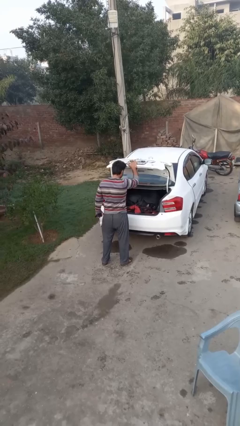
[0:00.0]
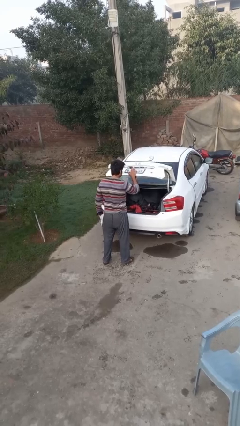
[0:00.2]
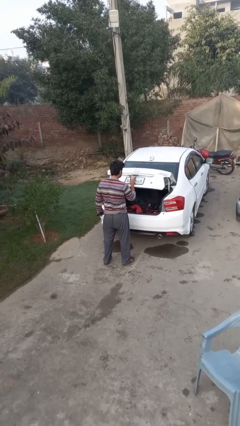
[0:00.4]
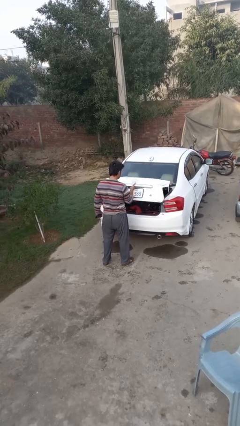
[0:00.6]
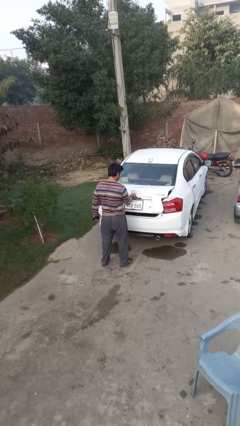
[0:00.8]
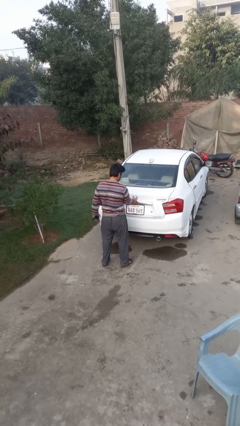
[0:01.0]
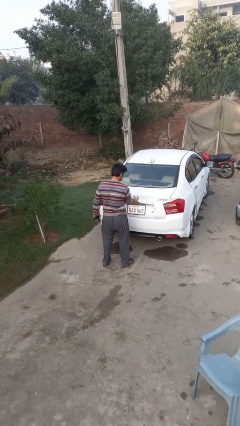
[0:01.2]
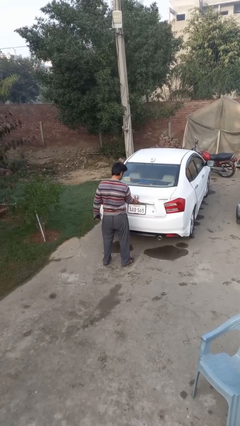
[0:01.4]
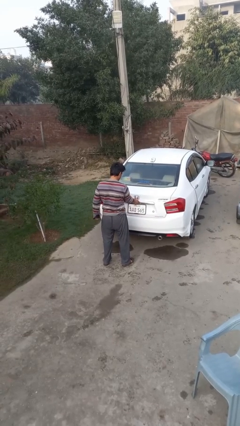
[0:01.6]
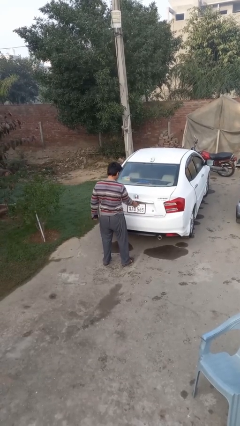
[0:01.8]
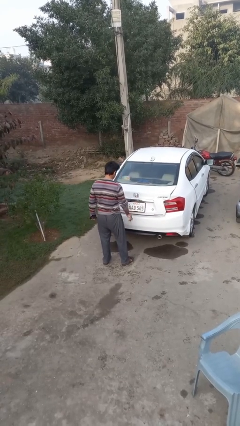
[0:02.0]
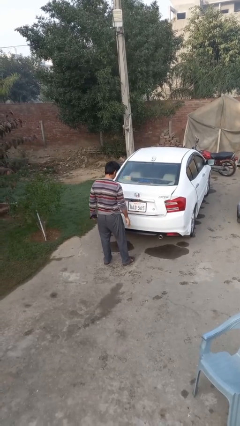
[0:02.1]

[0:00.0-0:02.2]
person closes car trunk

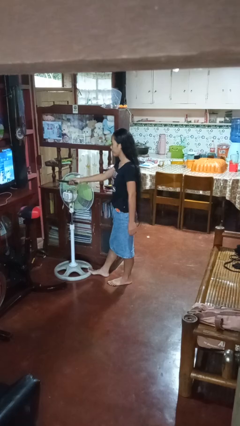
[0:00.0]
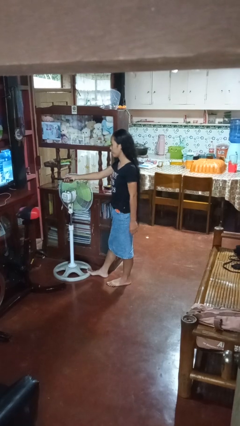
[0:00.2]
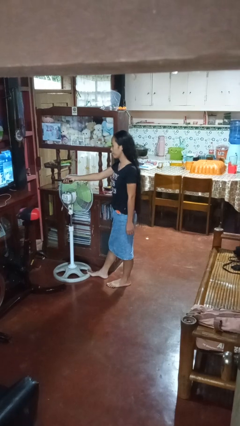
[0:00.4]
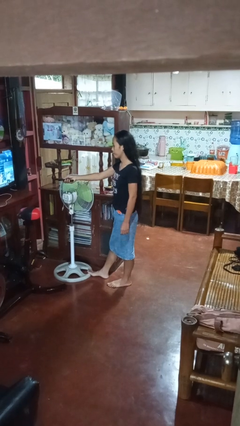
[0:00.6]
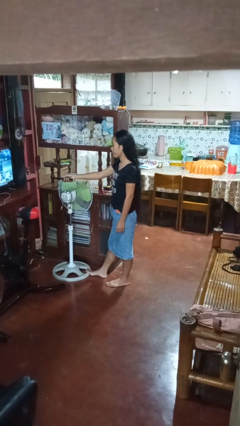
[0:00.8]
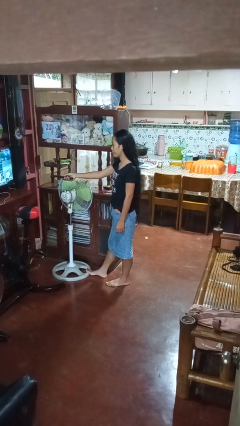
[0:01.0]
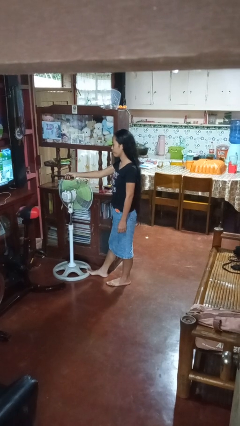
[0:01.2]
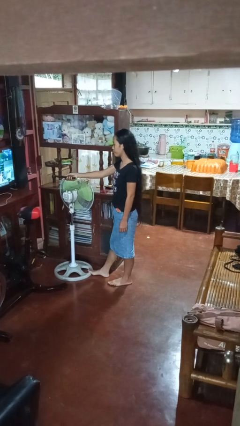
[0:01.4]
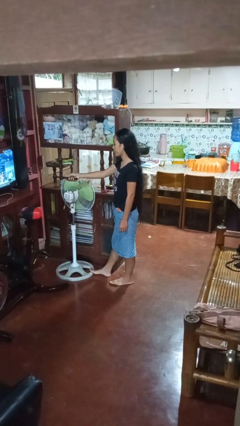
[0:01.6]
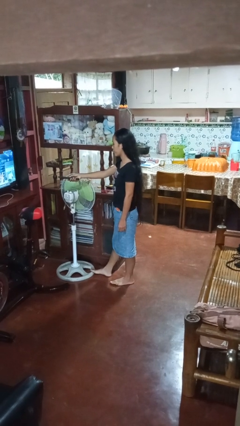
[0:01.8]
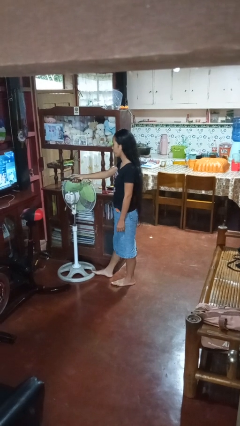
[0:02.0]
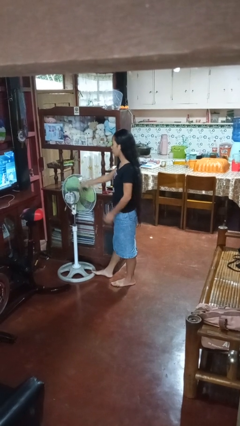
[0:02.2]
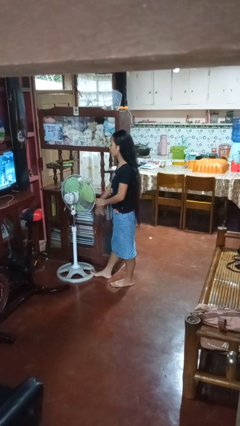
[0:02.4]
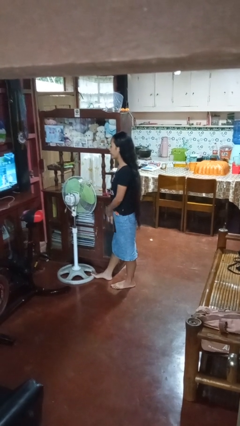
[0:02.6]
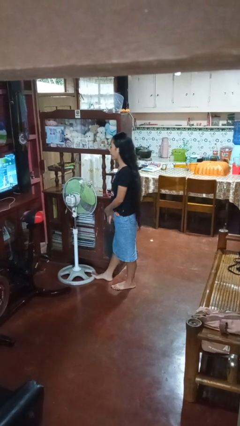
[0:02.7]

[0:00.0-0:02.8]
person uses television remote

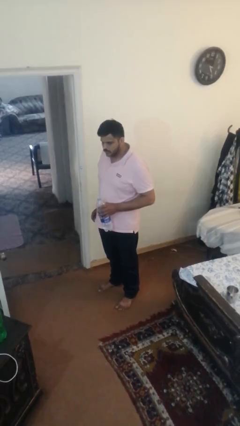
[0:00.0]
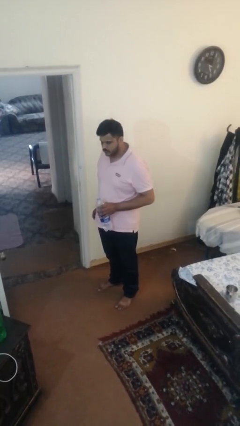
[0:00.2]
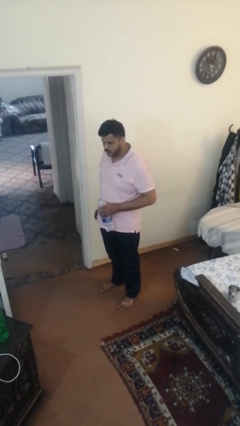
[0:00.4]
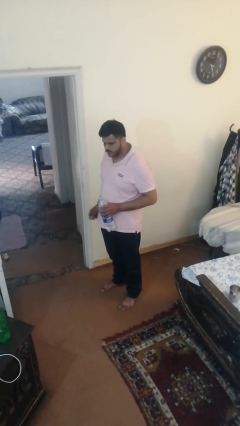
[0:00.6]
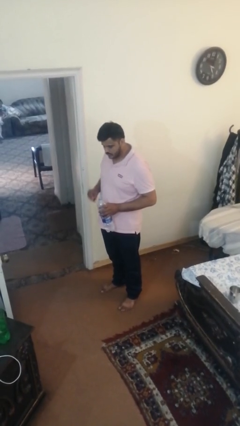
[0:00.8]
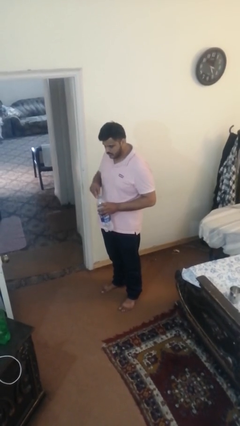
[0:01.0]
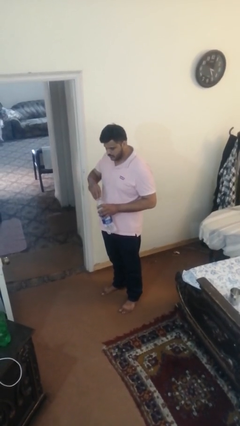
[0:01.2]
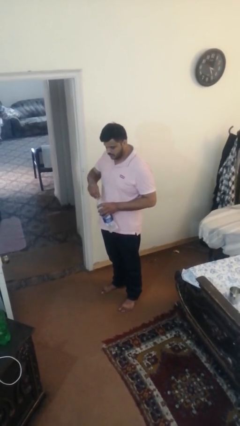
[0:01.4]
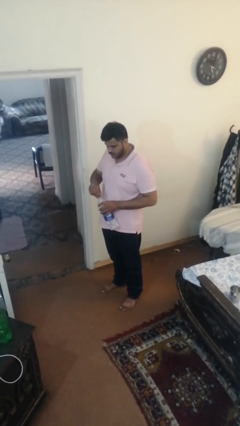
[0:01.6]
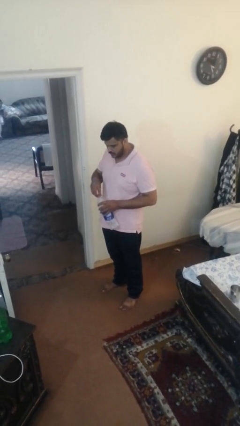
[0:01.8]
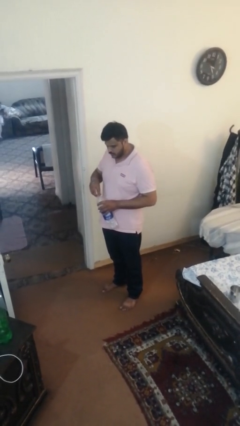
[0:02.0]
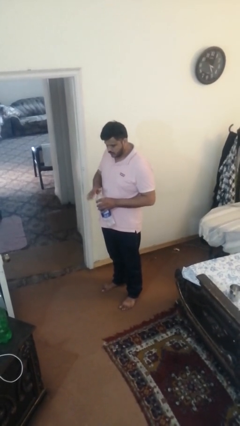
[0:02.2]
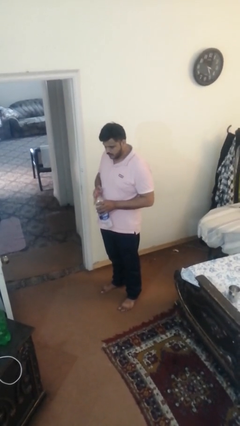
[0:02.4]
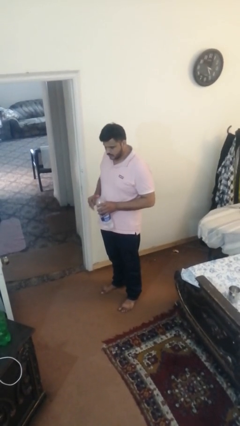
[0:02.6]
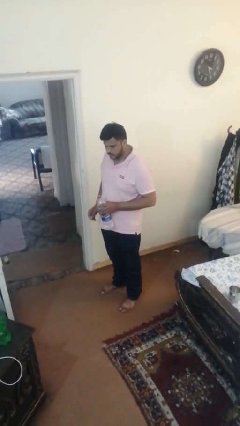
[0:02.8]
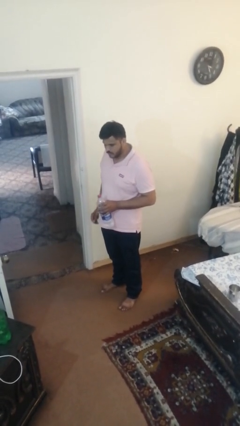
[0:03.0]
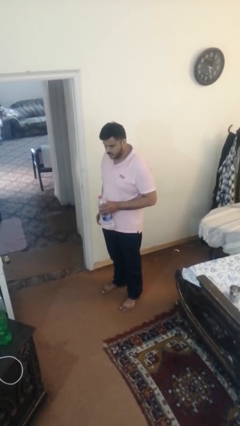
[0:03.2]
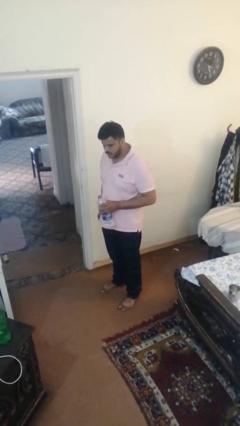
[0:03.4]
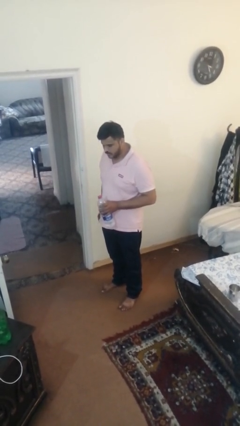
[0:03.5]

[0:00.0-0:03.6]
person screws lid to bottle

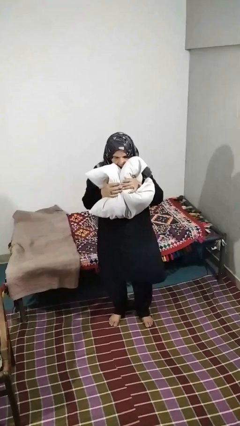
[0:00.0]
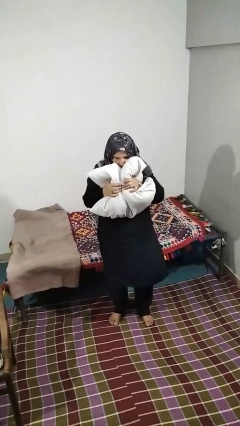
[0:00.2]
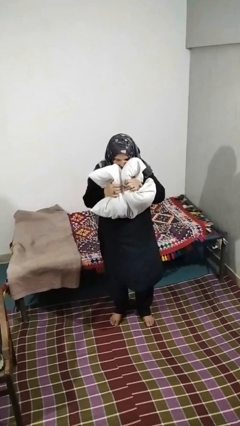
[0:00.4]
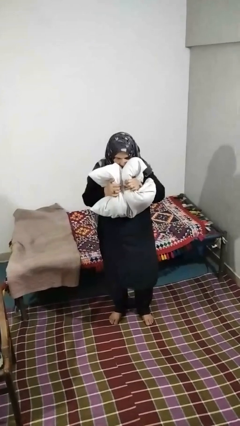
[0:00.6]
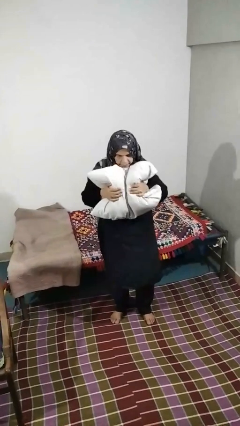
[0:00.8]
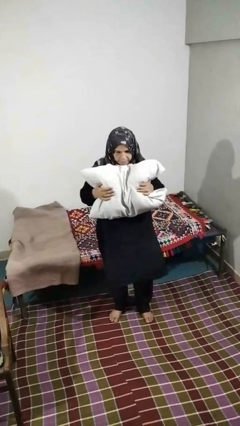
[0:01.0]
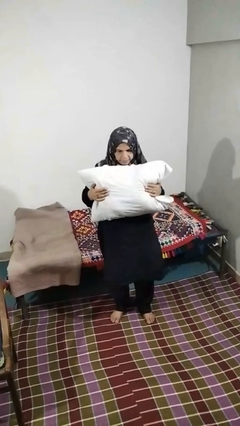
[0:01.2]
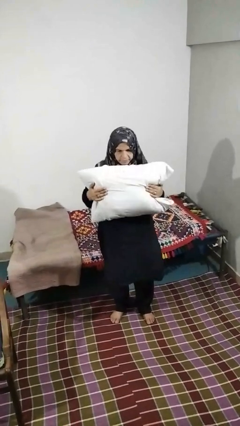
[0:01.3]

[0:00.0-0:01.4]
person squeezes object

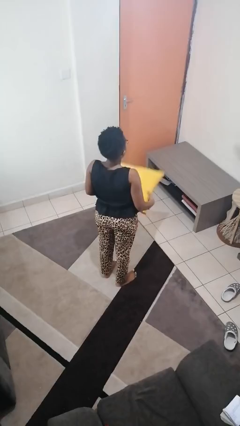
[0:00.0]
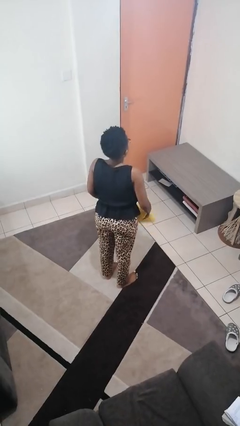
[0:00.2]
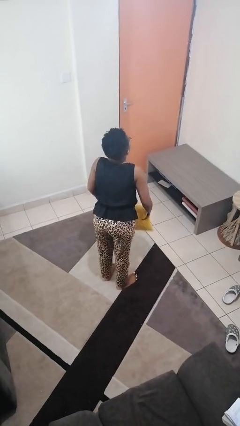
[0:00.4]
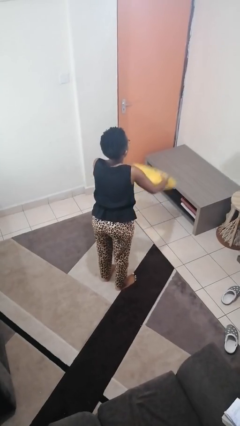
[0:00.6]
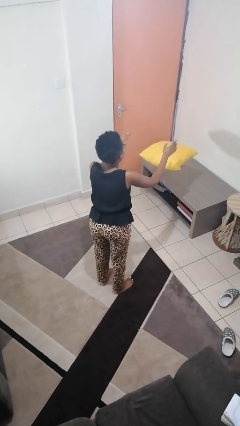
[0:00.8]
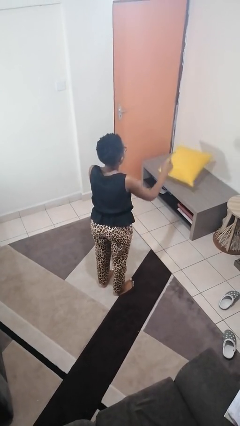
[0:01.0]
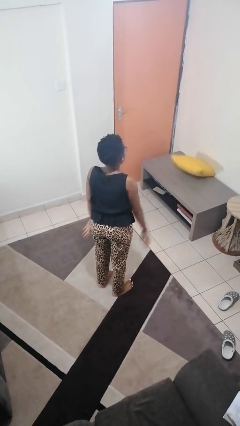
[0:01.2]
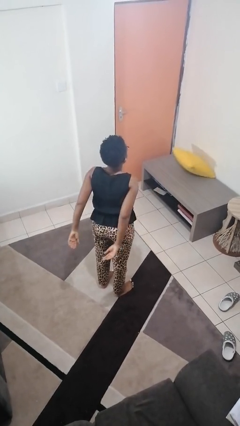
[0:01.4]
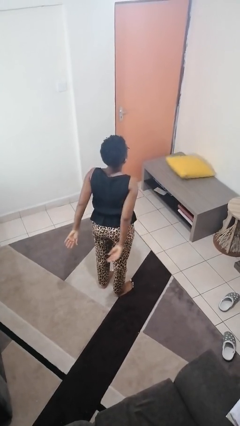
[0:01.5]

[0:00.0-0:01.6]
person throws object on table

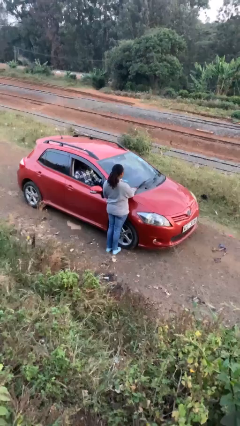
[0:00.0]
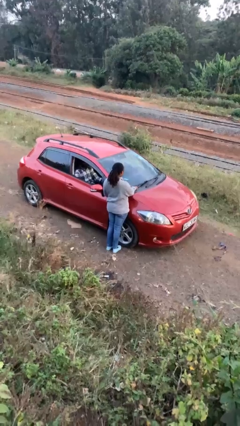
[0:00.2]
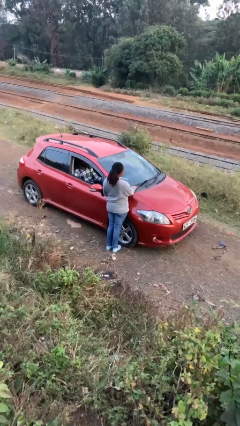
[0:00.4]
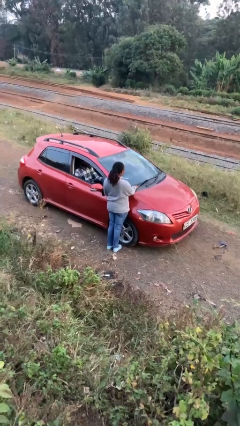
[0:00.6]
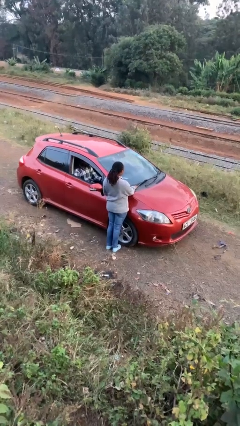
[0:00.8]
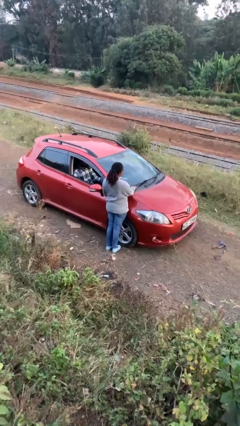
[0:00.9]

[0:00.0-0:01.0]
person flips down car wipers

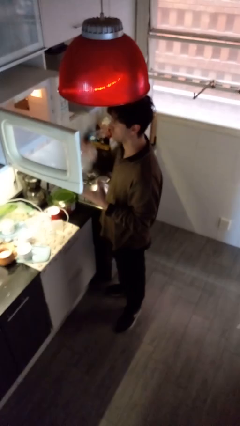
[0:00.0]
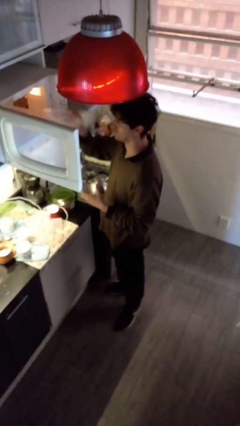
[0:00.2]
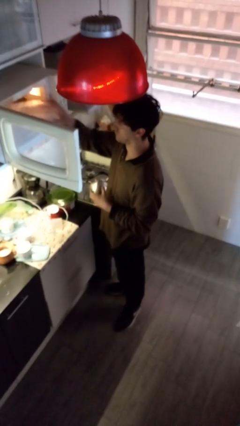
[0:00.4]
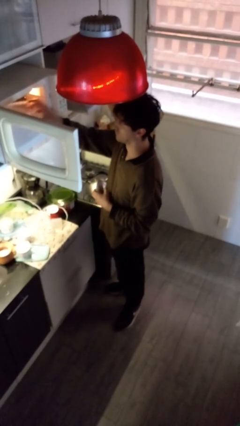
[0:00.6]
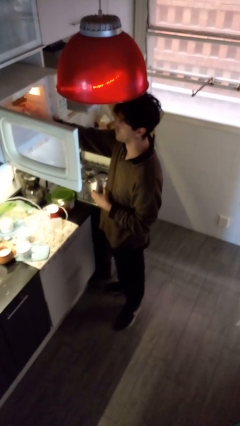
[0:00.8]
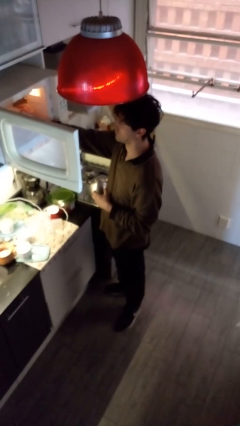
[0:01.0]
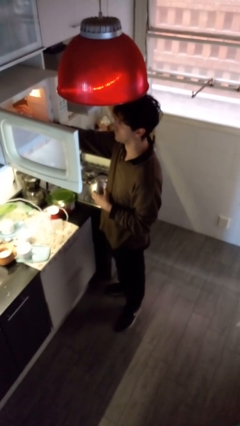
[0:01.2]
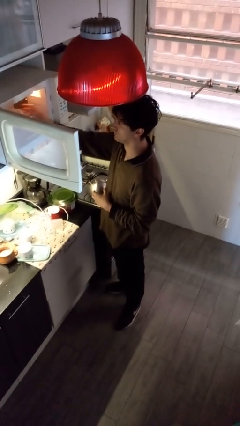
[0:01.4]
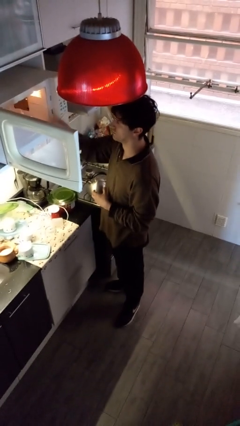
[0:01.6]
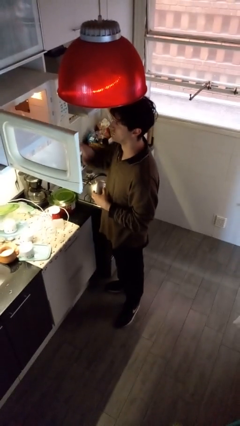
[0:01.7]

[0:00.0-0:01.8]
person puts object into microwave

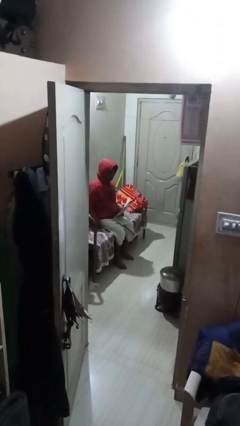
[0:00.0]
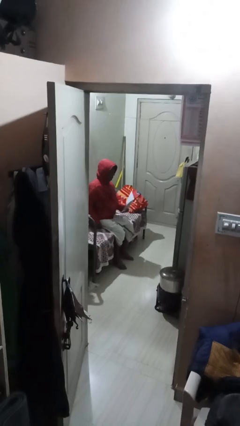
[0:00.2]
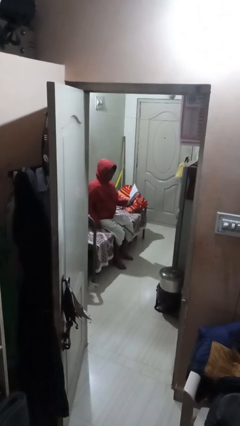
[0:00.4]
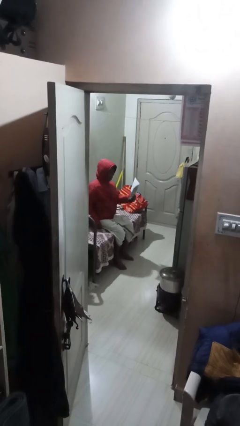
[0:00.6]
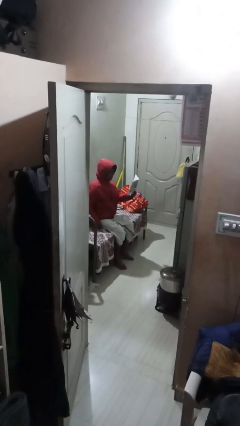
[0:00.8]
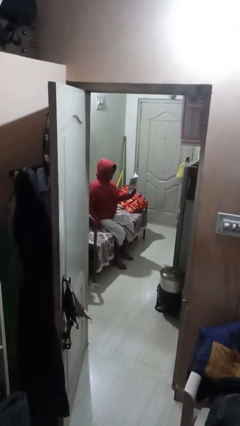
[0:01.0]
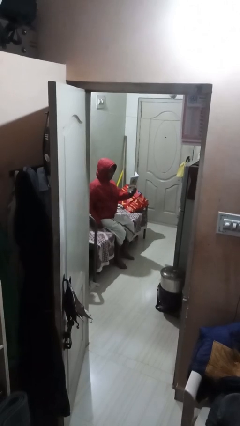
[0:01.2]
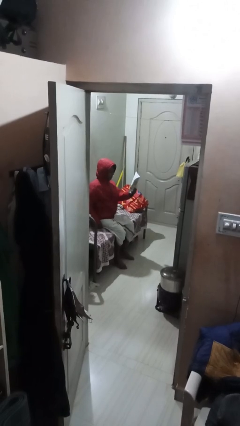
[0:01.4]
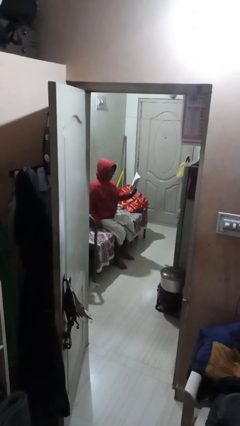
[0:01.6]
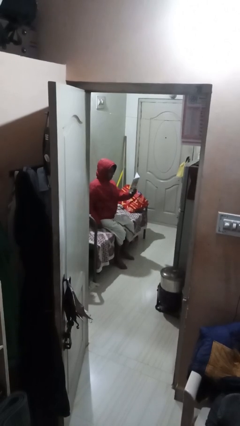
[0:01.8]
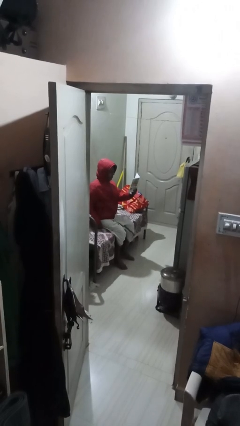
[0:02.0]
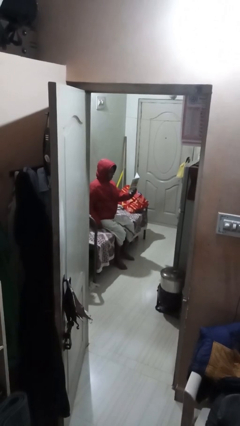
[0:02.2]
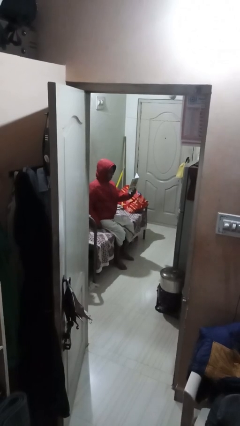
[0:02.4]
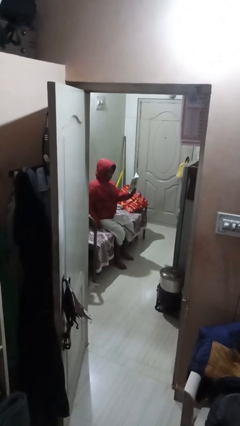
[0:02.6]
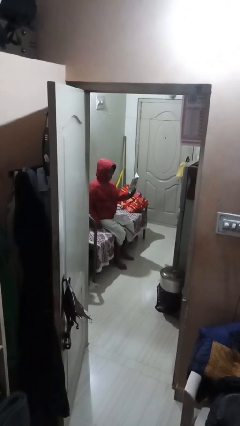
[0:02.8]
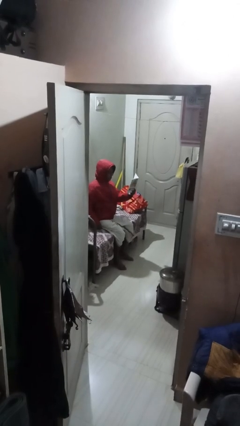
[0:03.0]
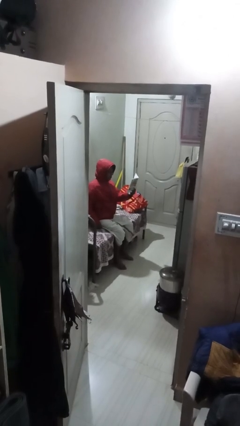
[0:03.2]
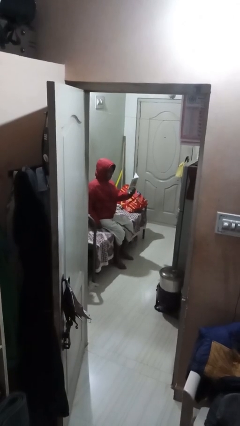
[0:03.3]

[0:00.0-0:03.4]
person reads document
